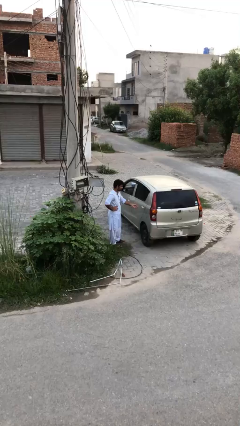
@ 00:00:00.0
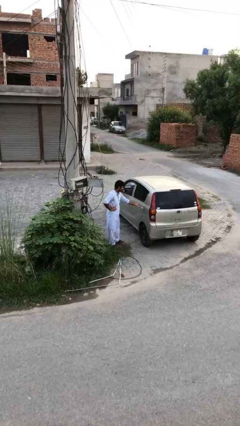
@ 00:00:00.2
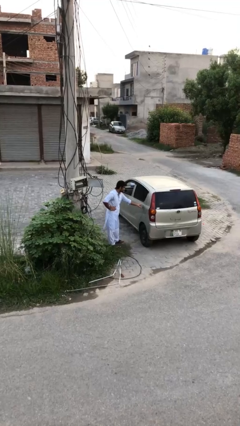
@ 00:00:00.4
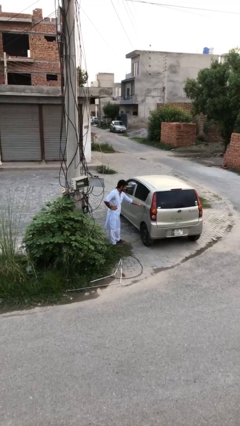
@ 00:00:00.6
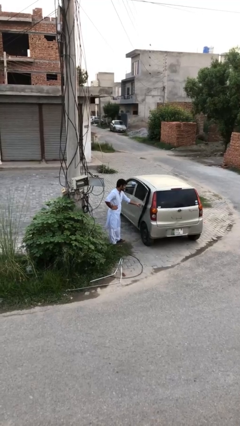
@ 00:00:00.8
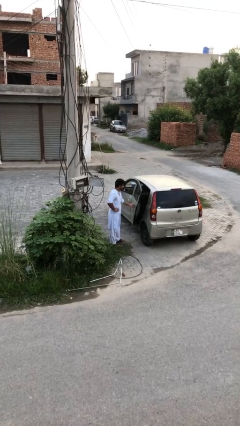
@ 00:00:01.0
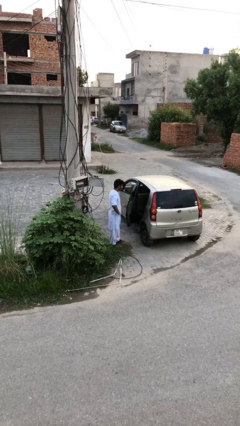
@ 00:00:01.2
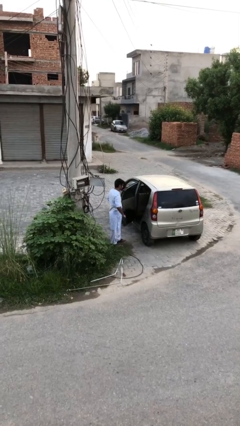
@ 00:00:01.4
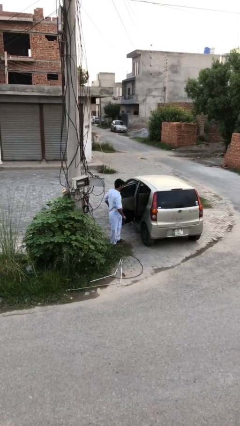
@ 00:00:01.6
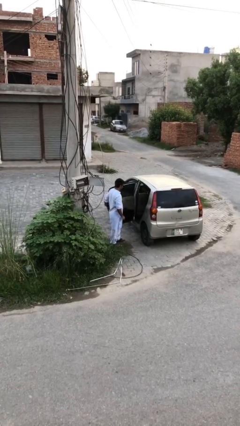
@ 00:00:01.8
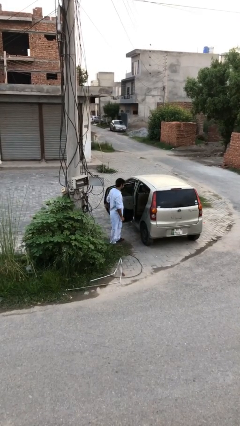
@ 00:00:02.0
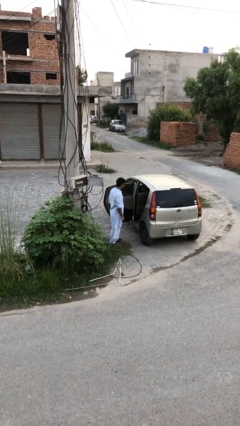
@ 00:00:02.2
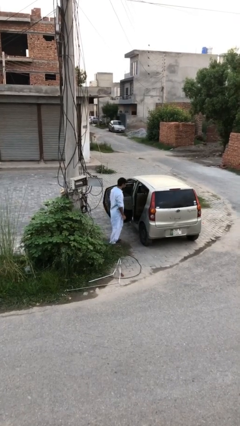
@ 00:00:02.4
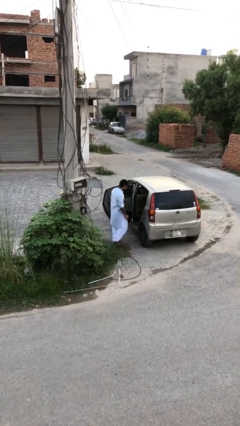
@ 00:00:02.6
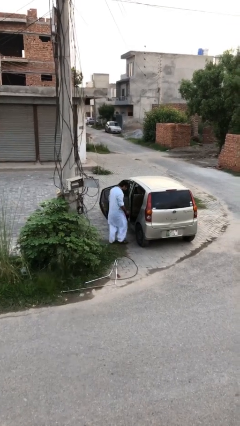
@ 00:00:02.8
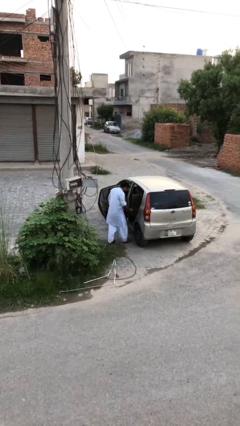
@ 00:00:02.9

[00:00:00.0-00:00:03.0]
person opens car door

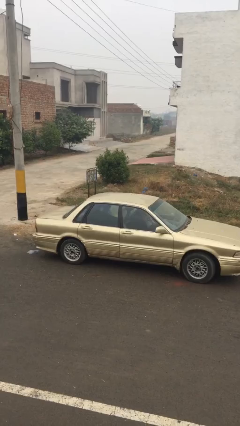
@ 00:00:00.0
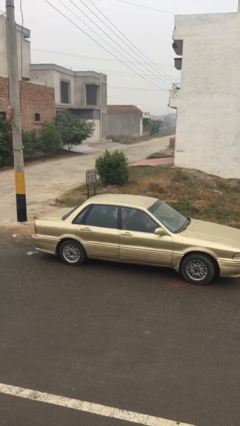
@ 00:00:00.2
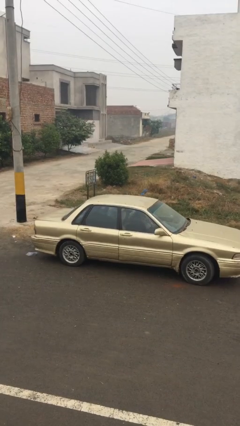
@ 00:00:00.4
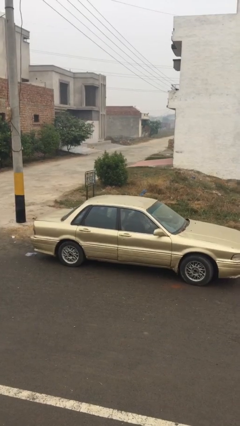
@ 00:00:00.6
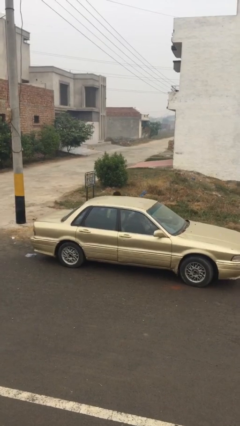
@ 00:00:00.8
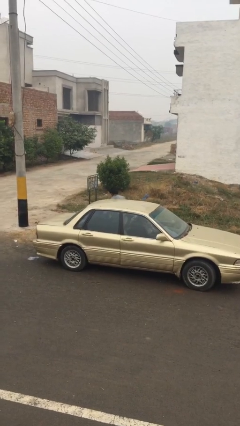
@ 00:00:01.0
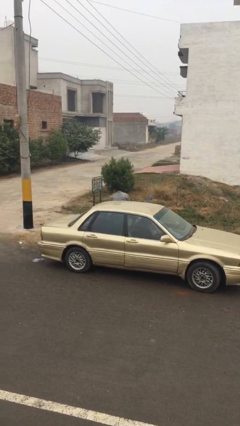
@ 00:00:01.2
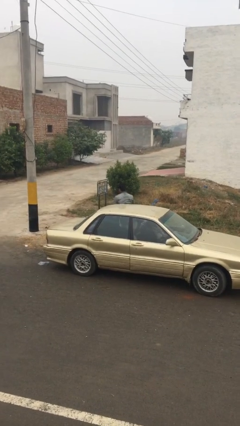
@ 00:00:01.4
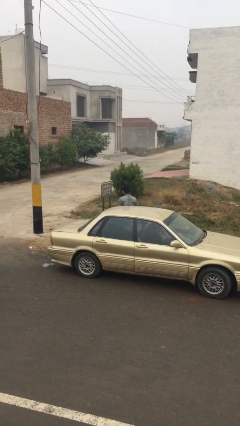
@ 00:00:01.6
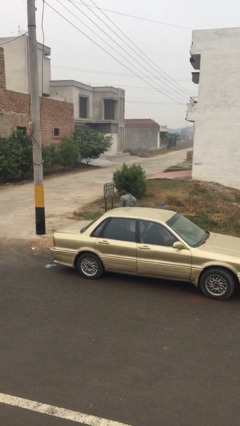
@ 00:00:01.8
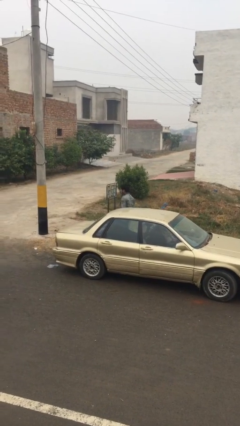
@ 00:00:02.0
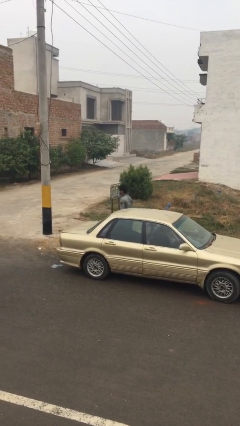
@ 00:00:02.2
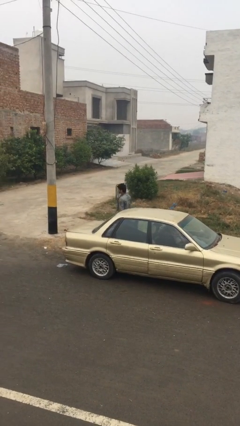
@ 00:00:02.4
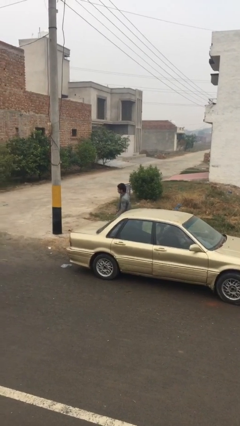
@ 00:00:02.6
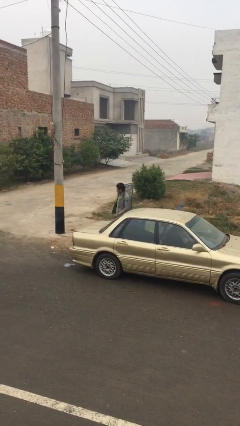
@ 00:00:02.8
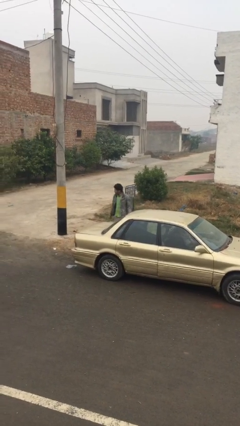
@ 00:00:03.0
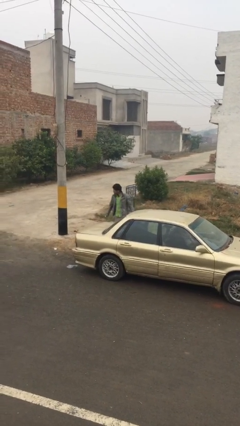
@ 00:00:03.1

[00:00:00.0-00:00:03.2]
person exits car

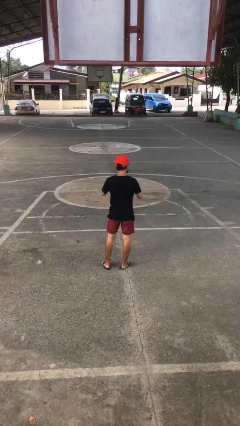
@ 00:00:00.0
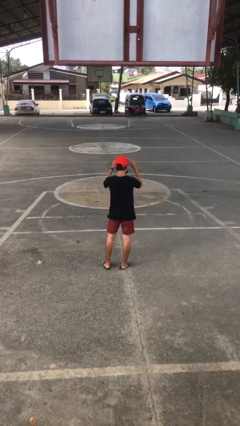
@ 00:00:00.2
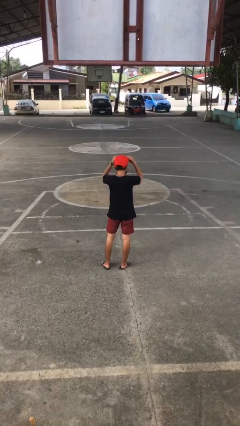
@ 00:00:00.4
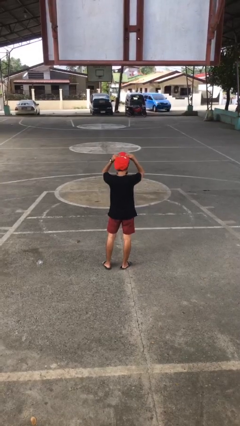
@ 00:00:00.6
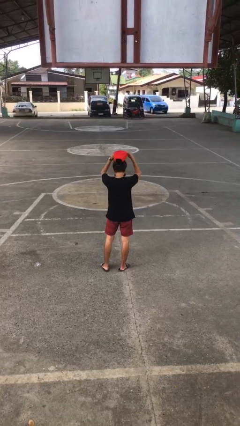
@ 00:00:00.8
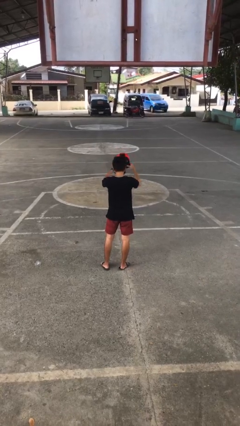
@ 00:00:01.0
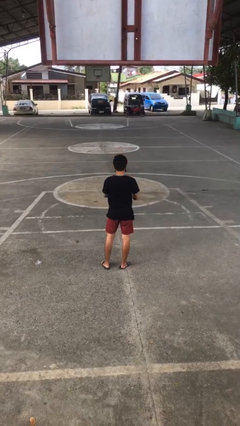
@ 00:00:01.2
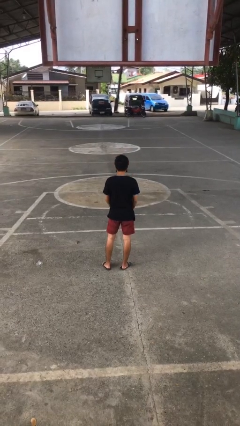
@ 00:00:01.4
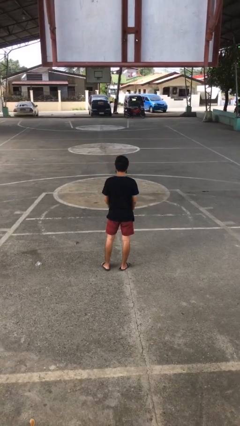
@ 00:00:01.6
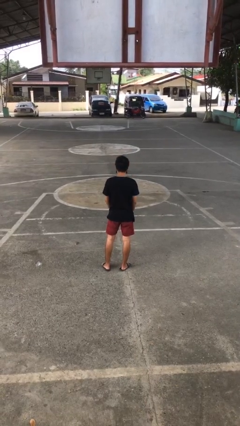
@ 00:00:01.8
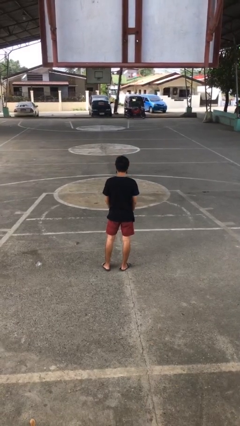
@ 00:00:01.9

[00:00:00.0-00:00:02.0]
person takes off hat

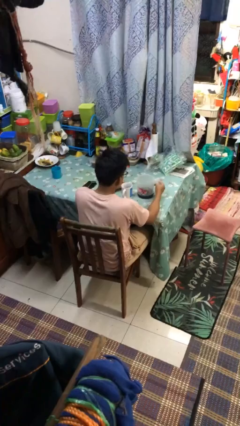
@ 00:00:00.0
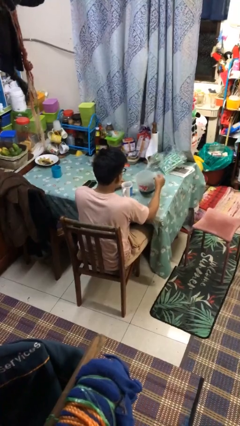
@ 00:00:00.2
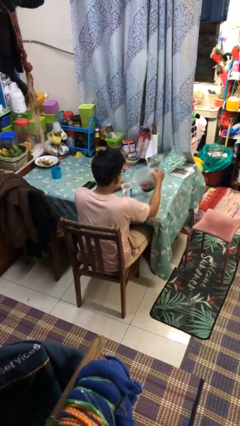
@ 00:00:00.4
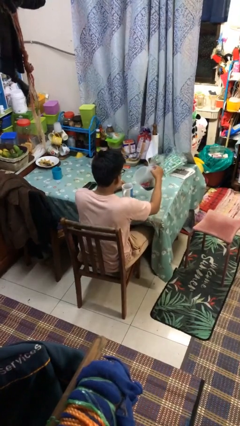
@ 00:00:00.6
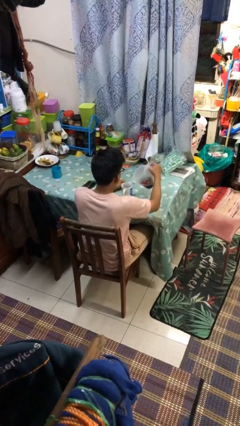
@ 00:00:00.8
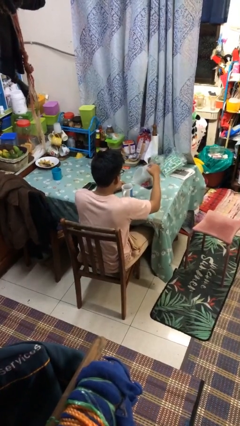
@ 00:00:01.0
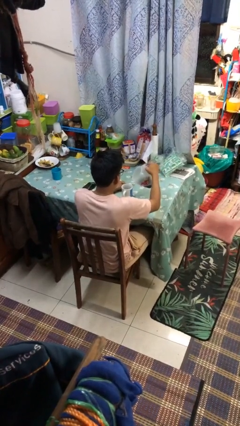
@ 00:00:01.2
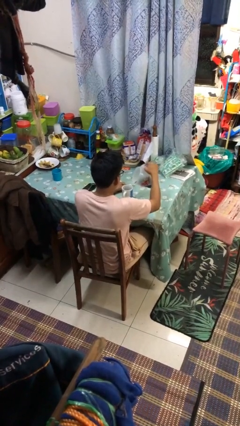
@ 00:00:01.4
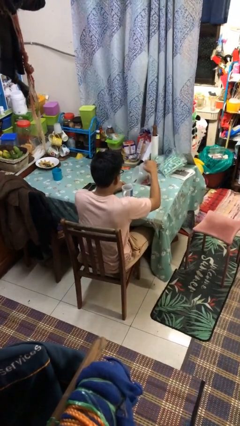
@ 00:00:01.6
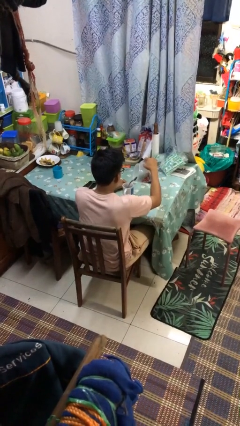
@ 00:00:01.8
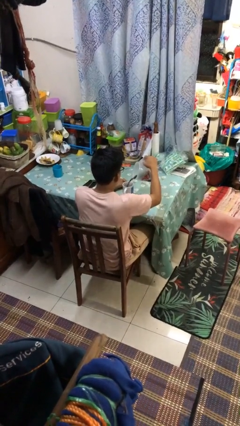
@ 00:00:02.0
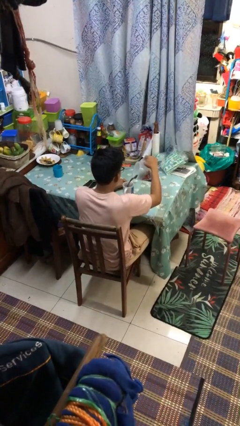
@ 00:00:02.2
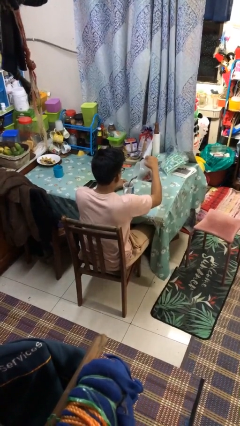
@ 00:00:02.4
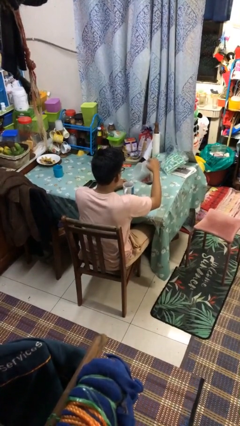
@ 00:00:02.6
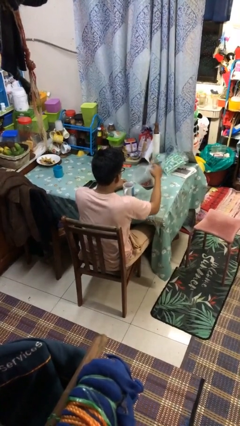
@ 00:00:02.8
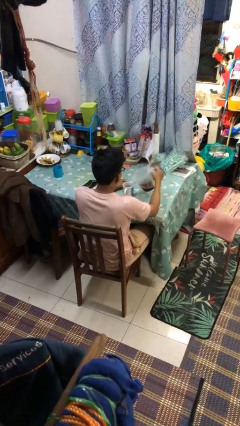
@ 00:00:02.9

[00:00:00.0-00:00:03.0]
person pours coffee into mug

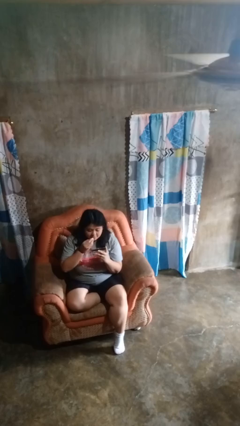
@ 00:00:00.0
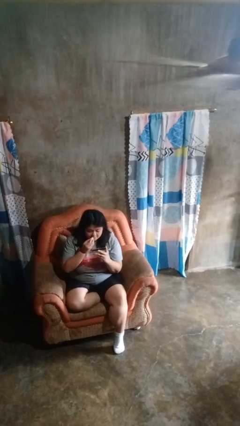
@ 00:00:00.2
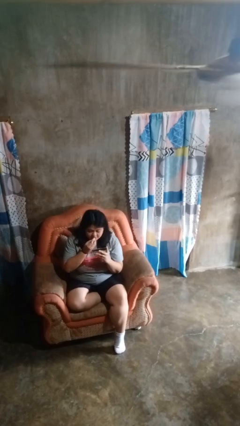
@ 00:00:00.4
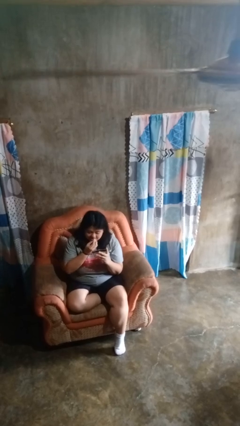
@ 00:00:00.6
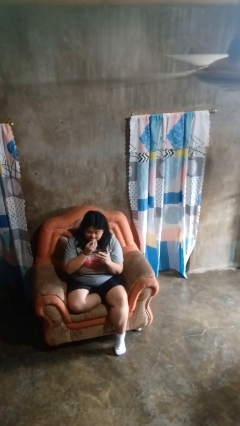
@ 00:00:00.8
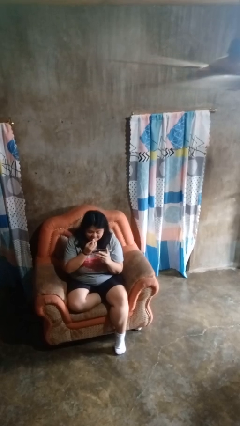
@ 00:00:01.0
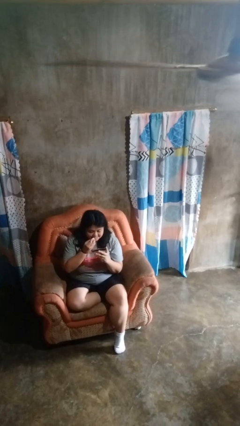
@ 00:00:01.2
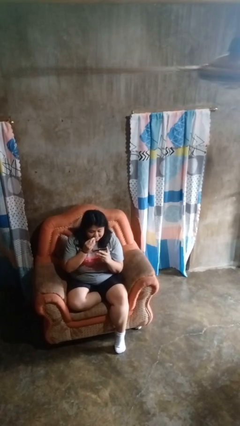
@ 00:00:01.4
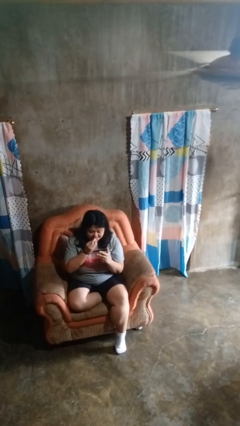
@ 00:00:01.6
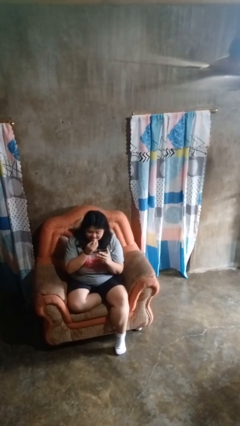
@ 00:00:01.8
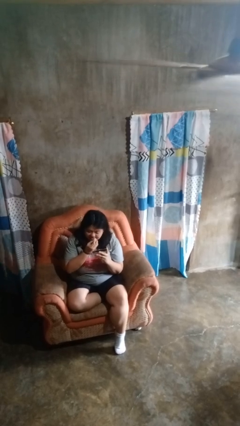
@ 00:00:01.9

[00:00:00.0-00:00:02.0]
person applies lip makeup

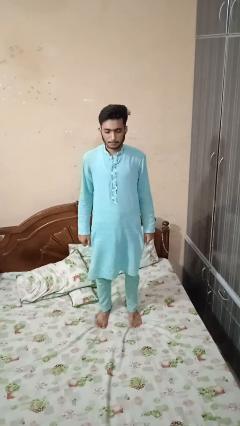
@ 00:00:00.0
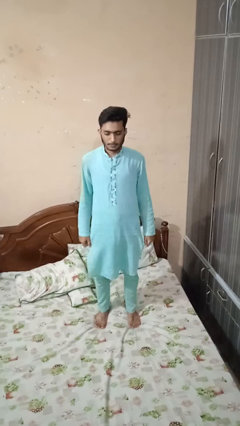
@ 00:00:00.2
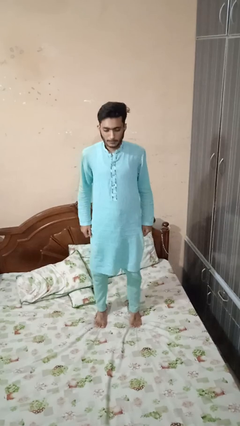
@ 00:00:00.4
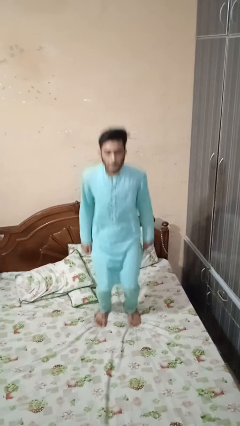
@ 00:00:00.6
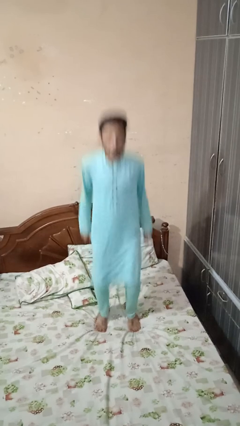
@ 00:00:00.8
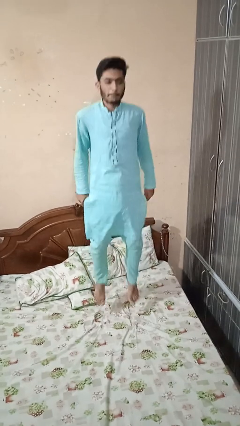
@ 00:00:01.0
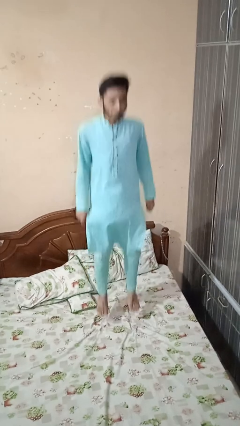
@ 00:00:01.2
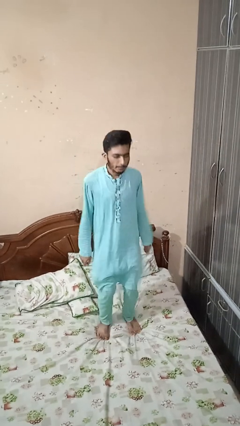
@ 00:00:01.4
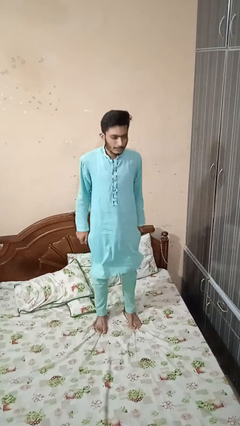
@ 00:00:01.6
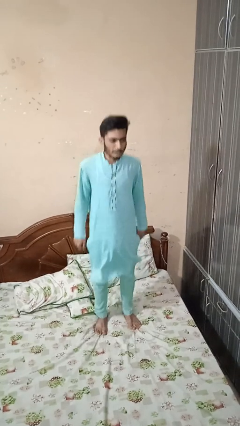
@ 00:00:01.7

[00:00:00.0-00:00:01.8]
person jumps on bed

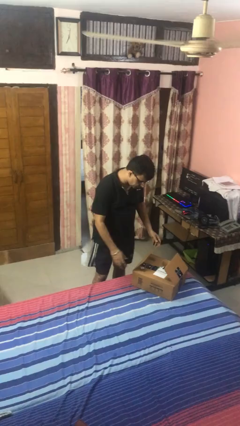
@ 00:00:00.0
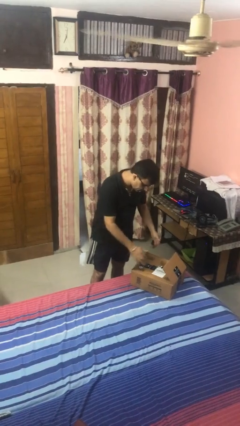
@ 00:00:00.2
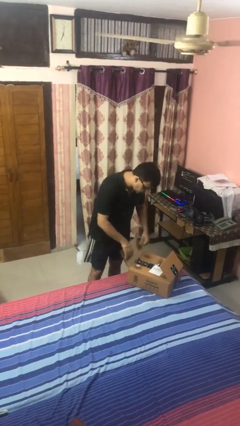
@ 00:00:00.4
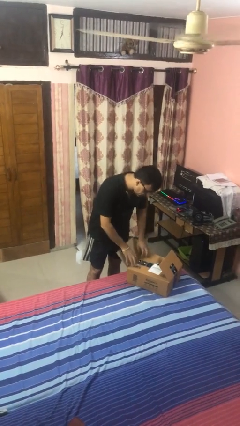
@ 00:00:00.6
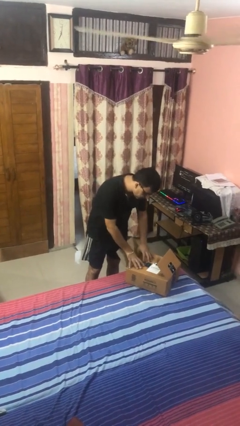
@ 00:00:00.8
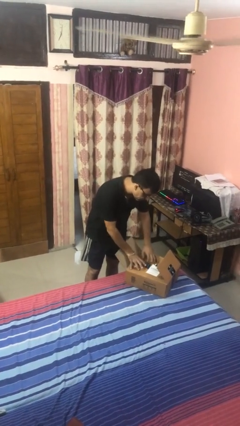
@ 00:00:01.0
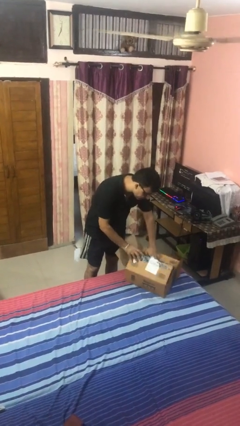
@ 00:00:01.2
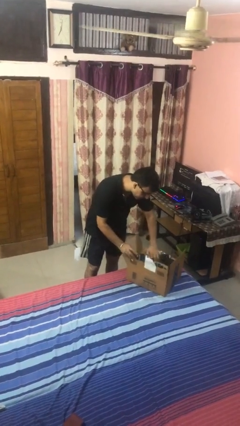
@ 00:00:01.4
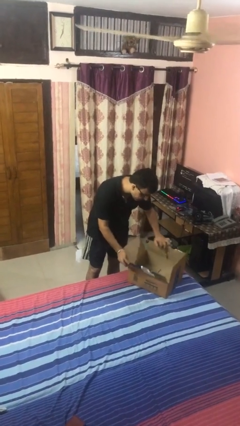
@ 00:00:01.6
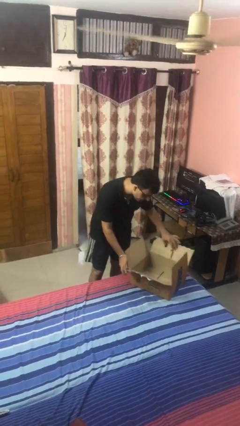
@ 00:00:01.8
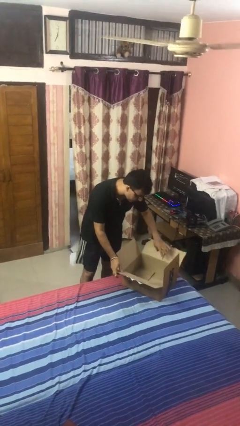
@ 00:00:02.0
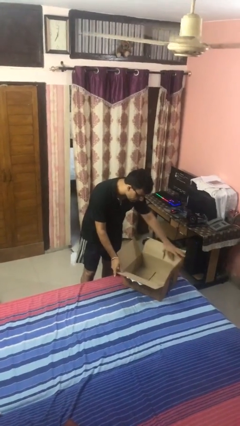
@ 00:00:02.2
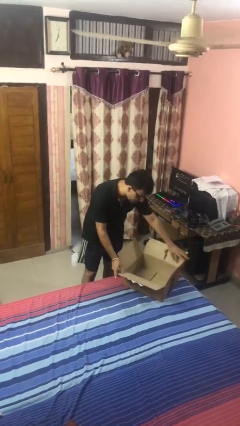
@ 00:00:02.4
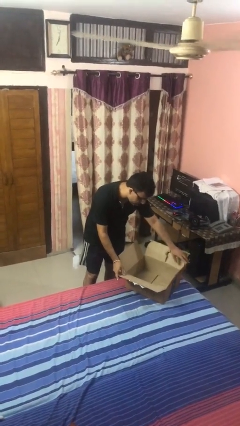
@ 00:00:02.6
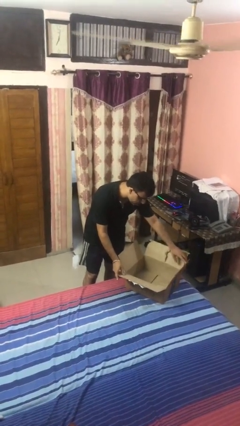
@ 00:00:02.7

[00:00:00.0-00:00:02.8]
person opens box
